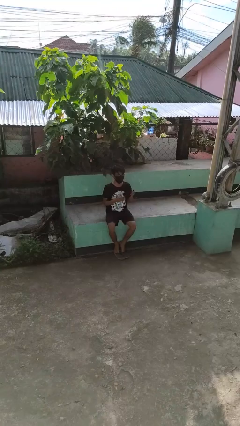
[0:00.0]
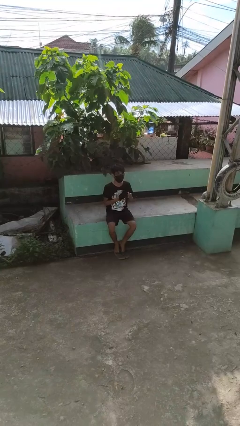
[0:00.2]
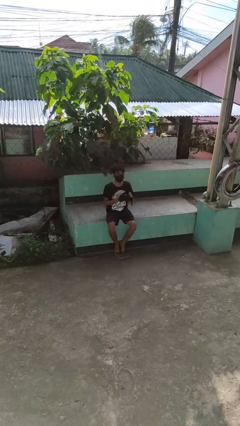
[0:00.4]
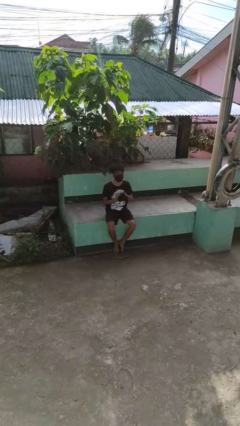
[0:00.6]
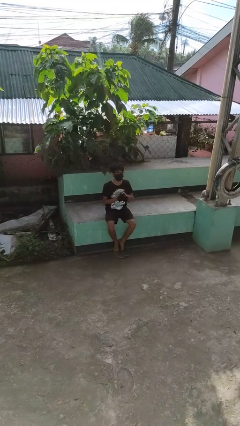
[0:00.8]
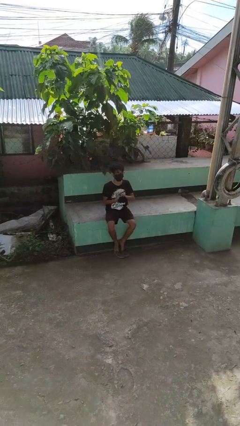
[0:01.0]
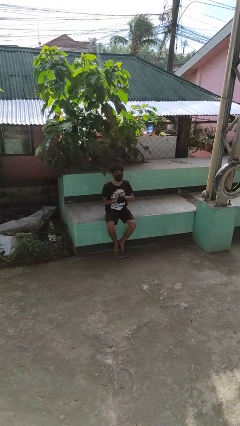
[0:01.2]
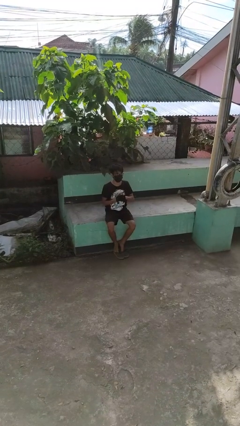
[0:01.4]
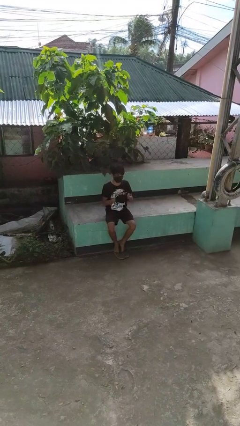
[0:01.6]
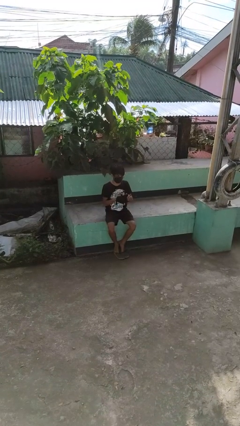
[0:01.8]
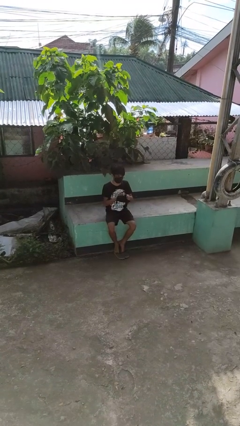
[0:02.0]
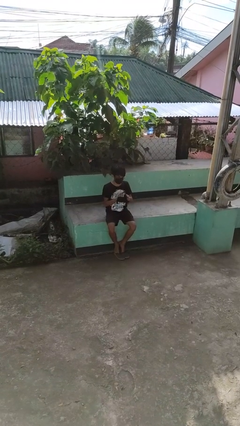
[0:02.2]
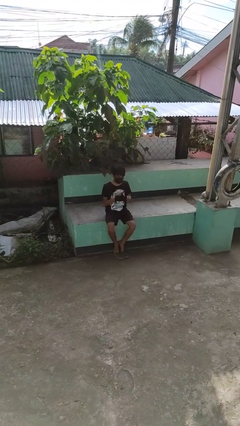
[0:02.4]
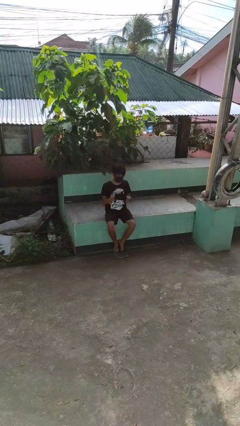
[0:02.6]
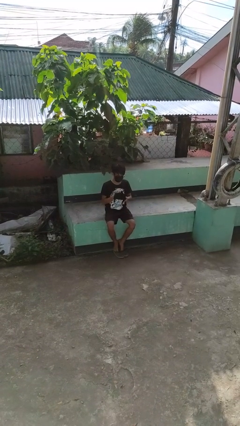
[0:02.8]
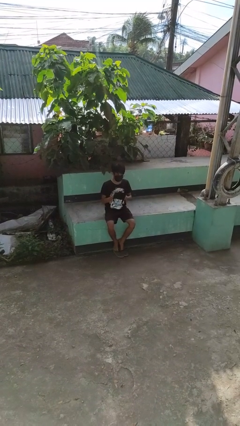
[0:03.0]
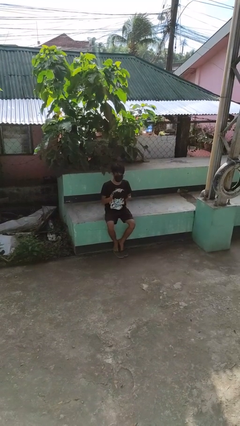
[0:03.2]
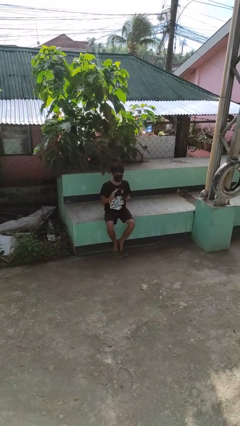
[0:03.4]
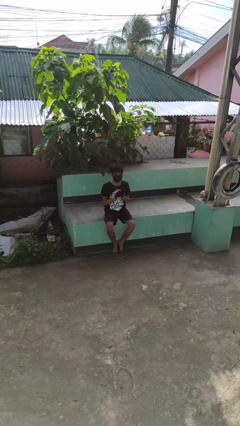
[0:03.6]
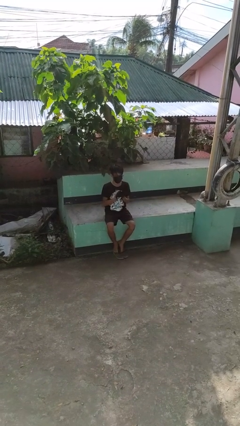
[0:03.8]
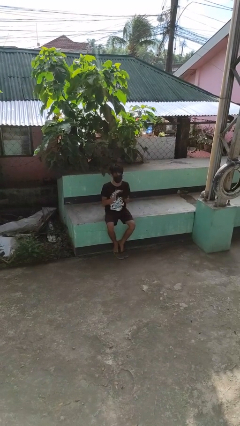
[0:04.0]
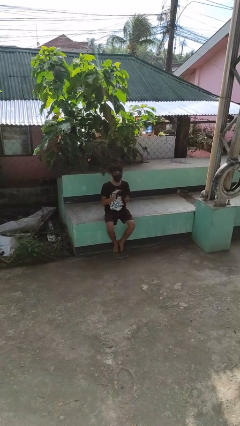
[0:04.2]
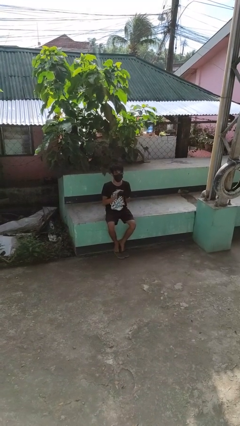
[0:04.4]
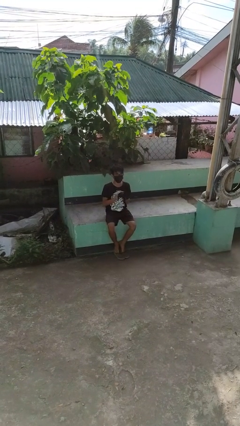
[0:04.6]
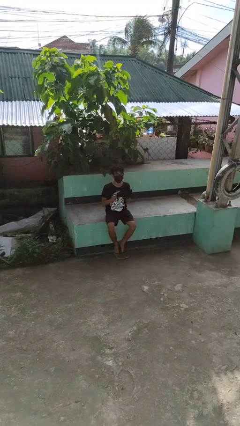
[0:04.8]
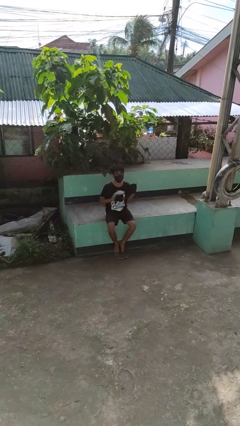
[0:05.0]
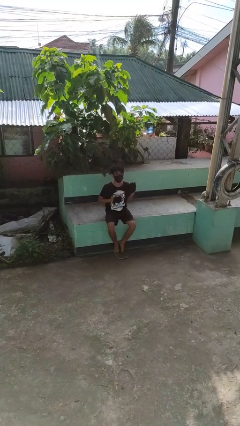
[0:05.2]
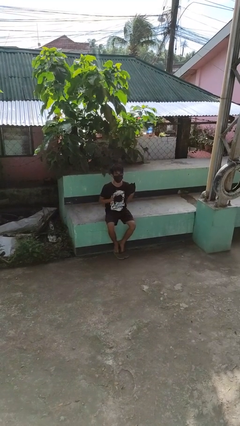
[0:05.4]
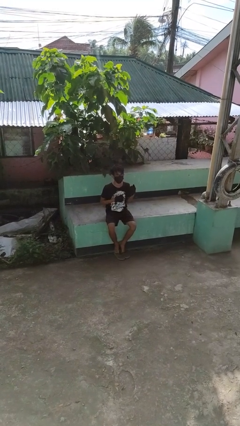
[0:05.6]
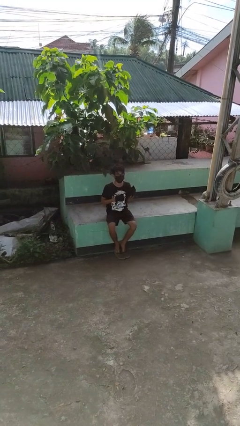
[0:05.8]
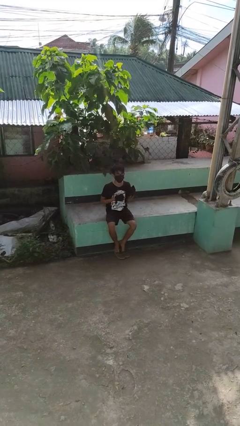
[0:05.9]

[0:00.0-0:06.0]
person puts on gloves

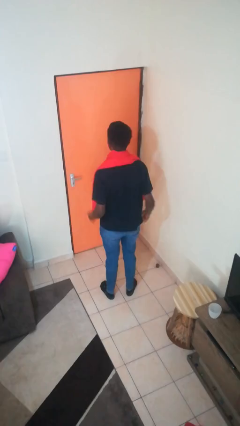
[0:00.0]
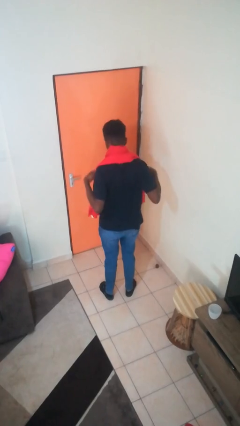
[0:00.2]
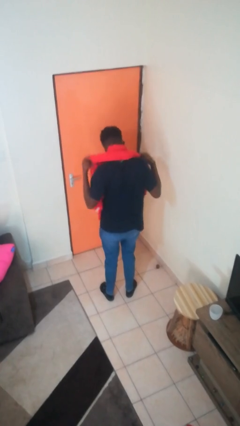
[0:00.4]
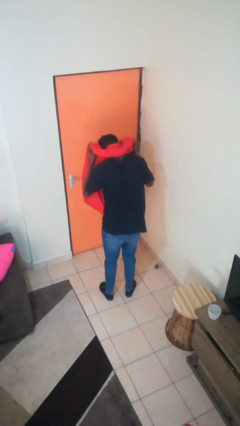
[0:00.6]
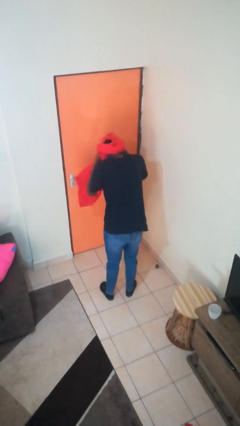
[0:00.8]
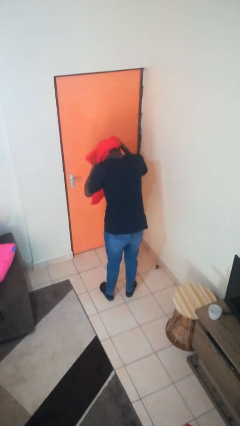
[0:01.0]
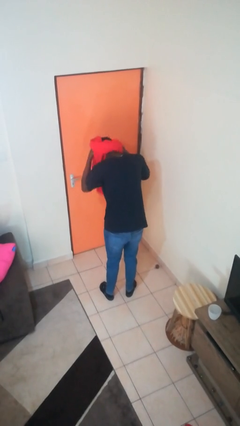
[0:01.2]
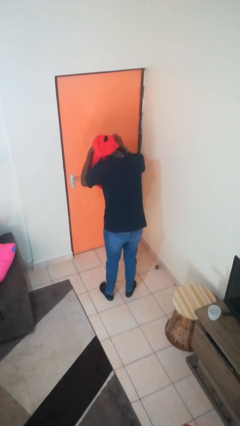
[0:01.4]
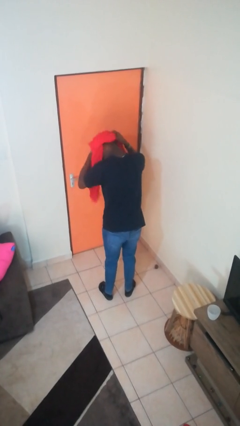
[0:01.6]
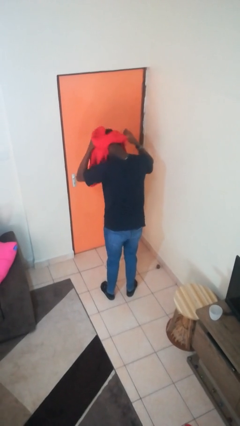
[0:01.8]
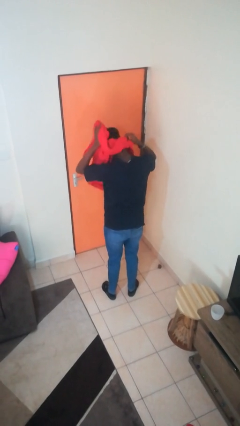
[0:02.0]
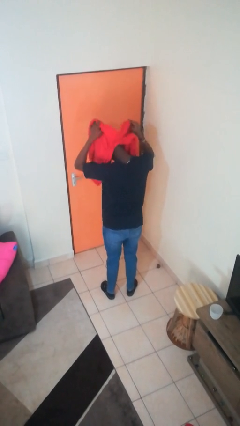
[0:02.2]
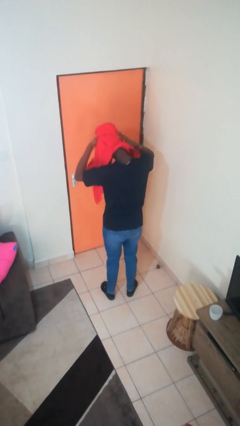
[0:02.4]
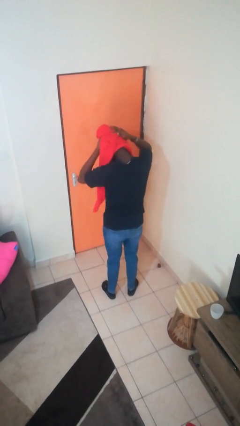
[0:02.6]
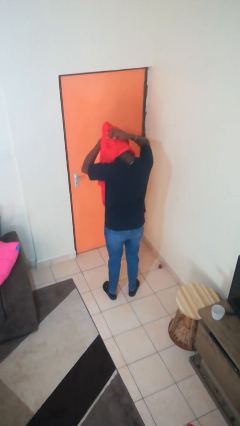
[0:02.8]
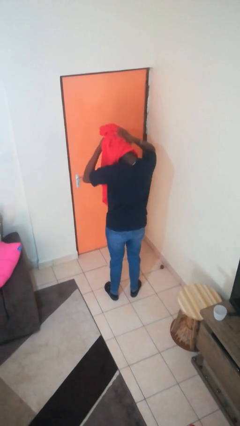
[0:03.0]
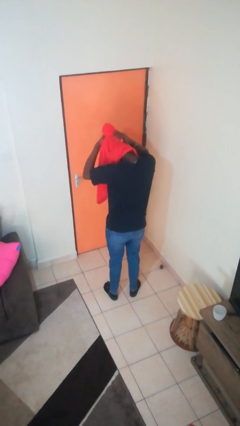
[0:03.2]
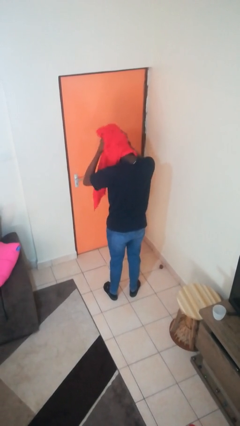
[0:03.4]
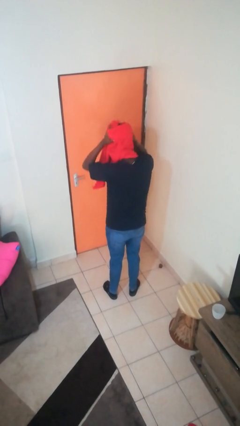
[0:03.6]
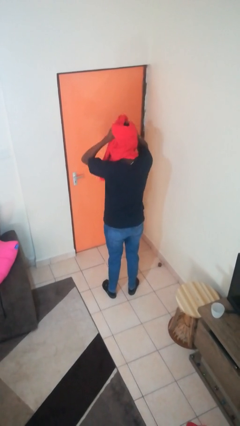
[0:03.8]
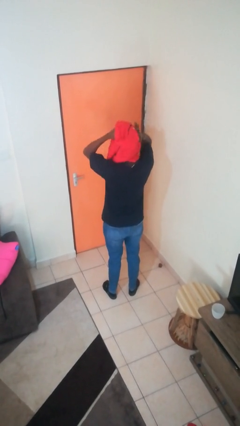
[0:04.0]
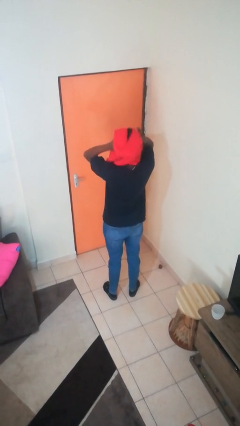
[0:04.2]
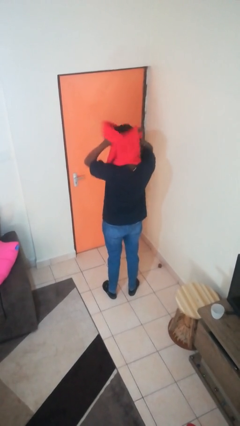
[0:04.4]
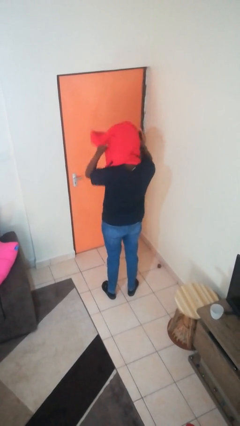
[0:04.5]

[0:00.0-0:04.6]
person dries hair with towel

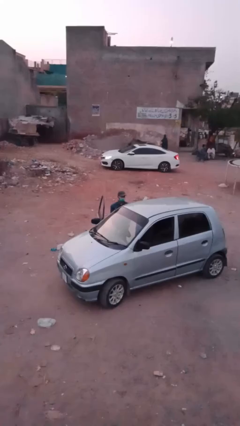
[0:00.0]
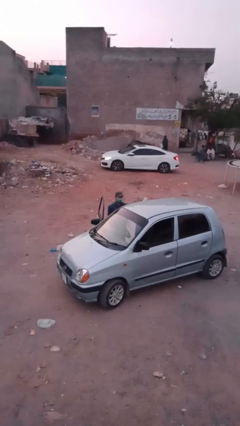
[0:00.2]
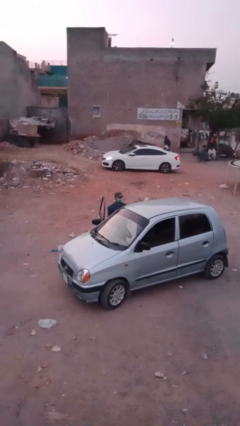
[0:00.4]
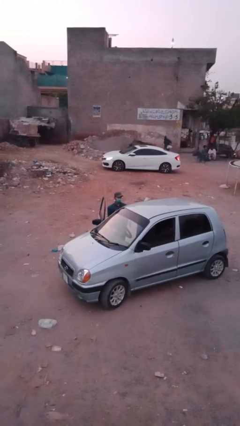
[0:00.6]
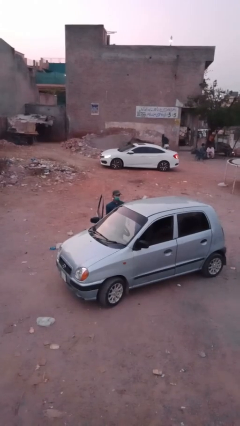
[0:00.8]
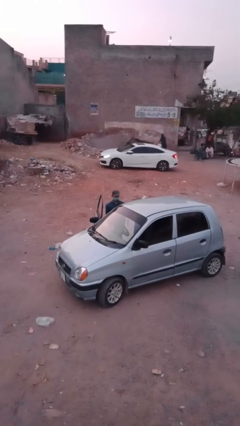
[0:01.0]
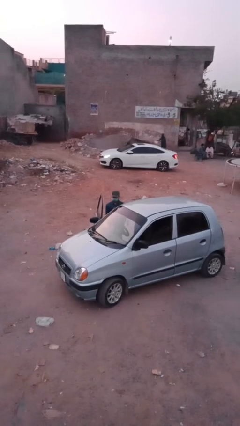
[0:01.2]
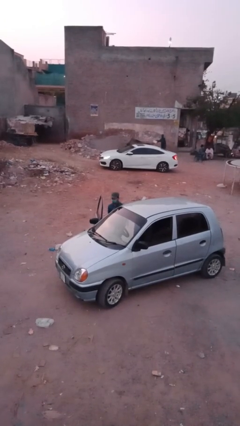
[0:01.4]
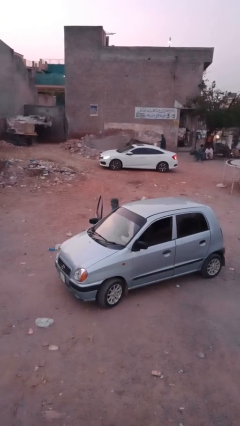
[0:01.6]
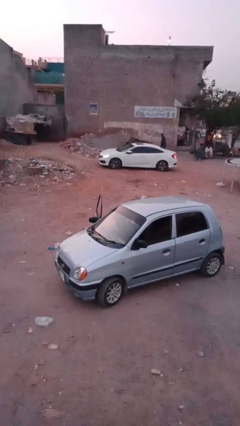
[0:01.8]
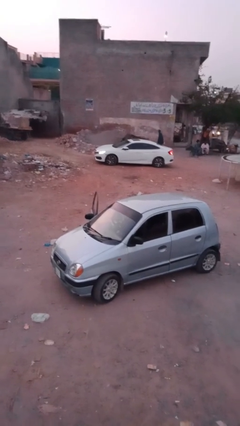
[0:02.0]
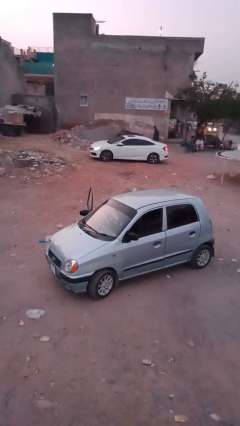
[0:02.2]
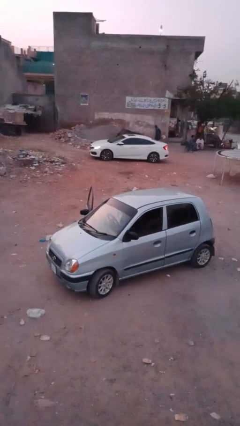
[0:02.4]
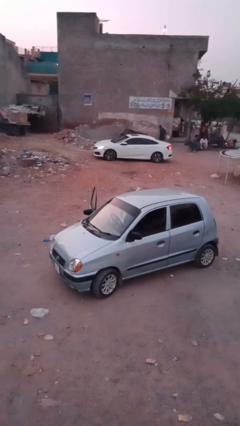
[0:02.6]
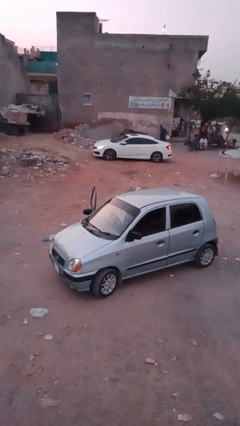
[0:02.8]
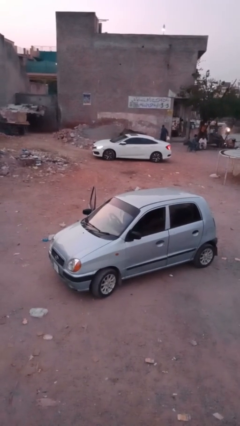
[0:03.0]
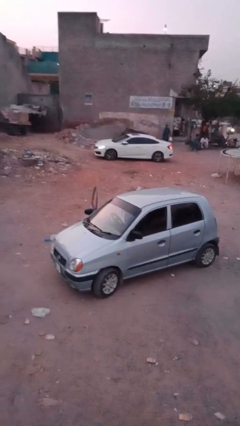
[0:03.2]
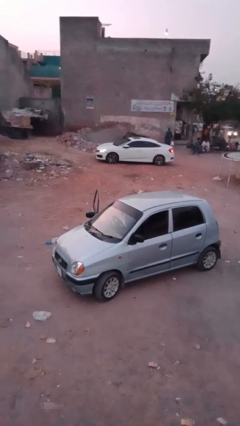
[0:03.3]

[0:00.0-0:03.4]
person enters car

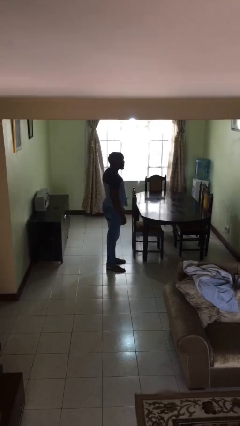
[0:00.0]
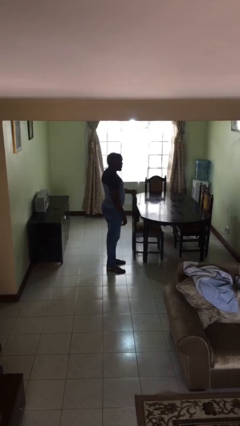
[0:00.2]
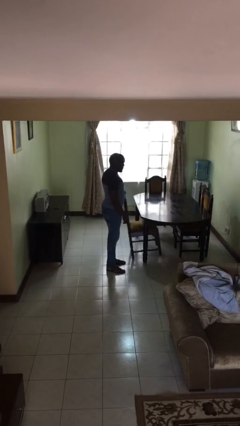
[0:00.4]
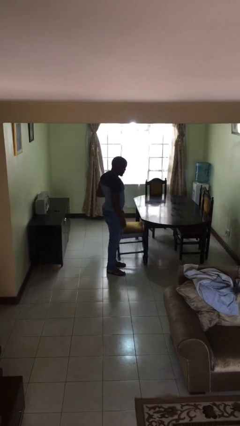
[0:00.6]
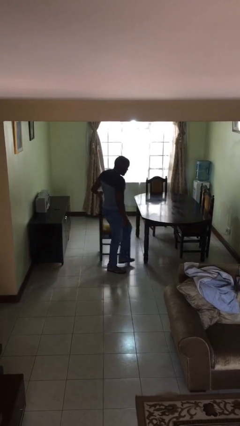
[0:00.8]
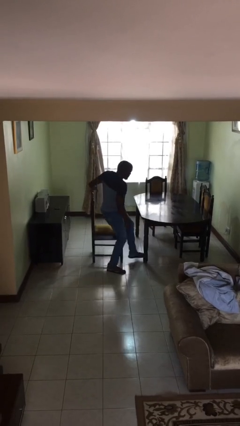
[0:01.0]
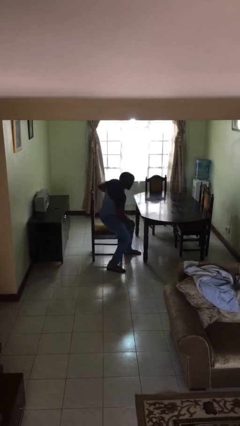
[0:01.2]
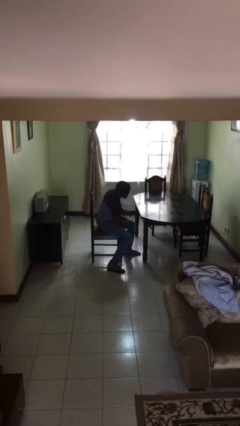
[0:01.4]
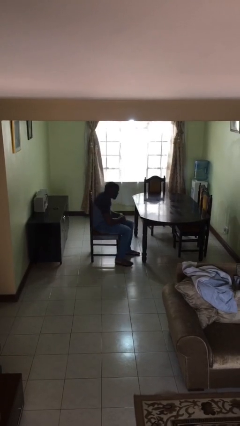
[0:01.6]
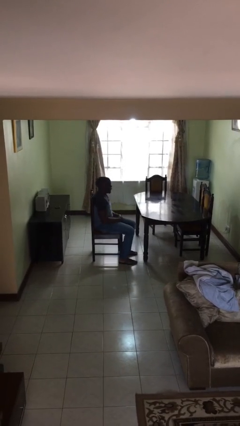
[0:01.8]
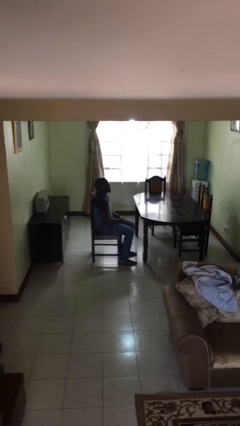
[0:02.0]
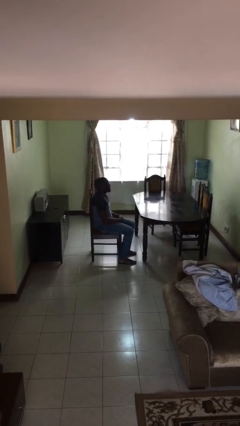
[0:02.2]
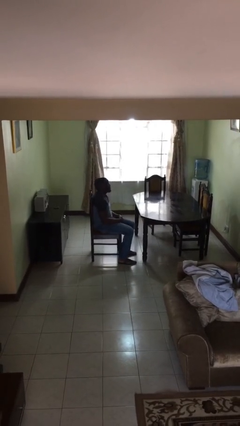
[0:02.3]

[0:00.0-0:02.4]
person sits down

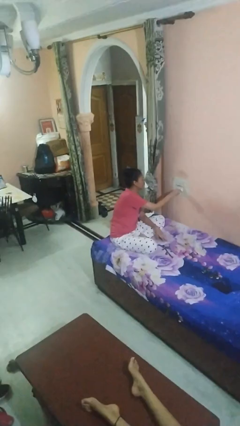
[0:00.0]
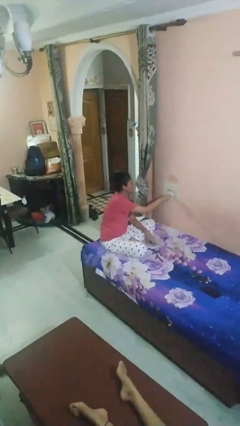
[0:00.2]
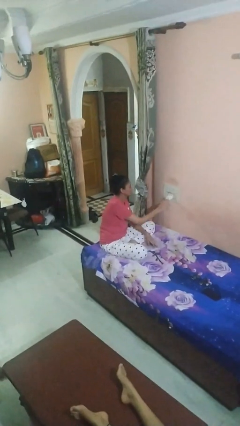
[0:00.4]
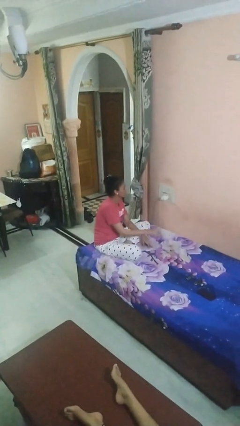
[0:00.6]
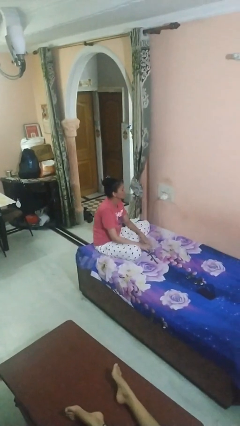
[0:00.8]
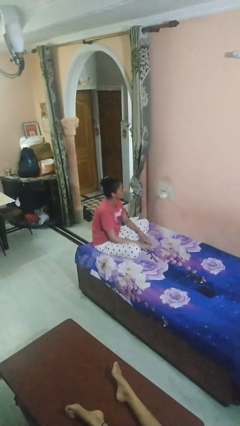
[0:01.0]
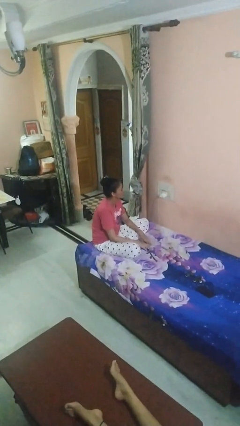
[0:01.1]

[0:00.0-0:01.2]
person plugs into electrical socket

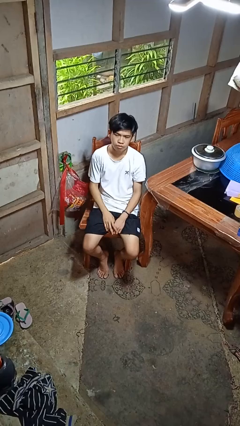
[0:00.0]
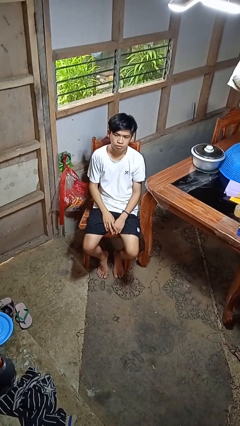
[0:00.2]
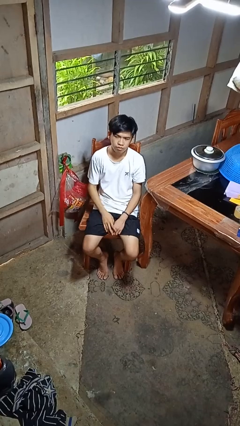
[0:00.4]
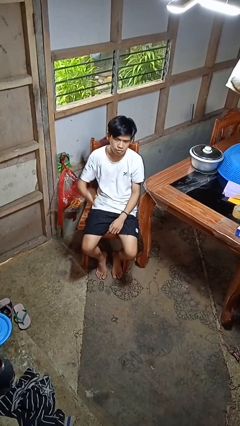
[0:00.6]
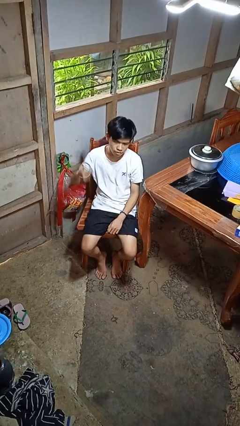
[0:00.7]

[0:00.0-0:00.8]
person gestures listen closely
